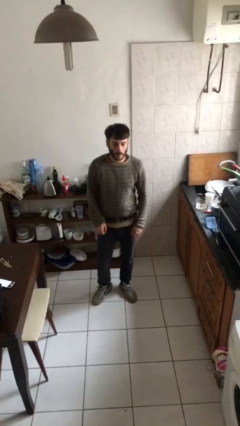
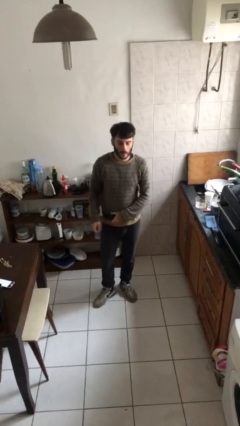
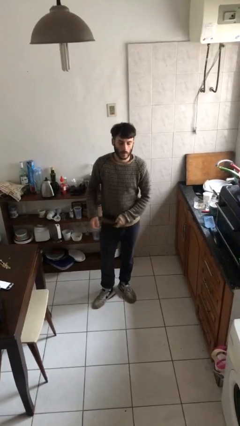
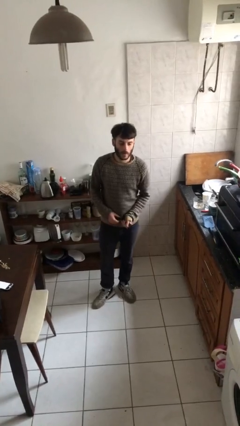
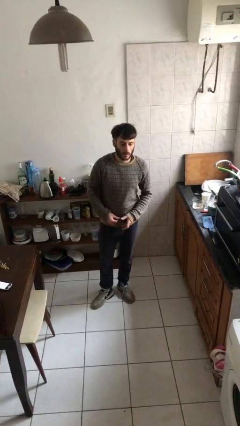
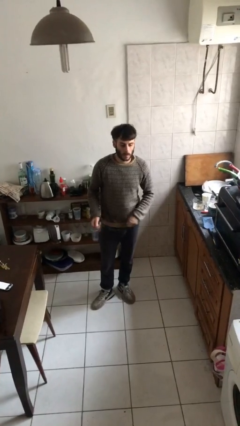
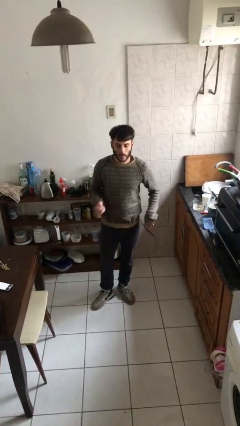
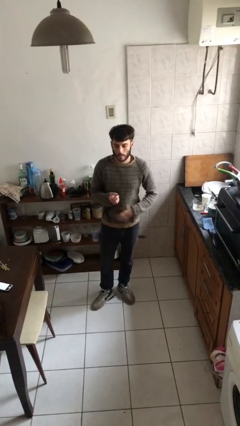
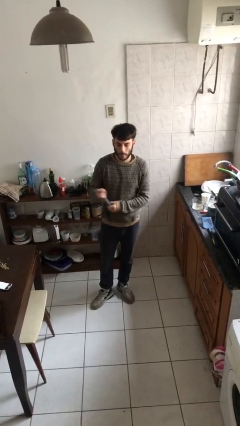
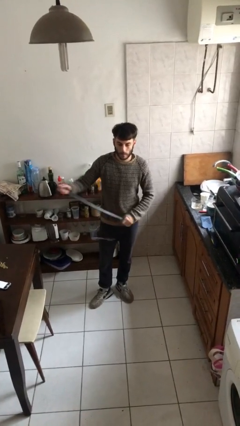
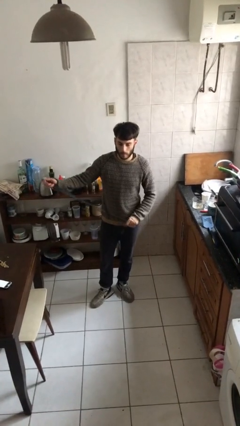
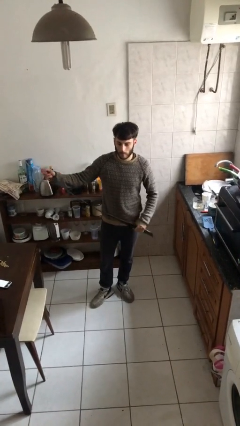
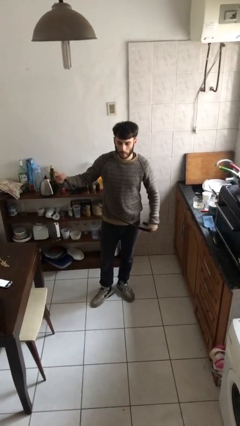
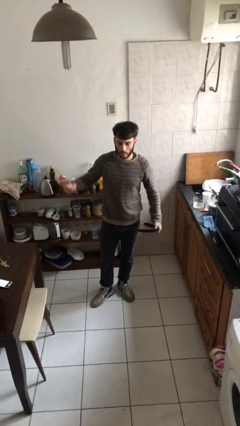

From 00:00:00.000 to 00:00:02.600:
person takes off belt

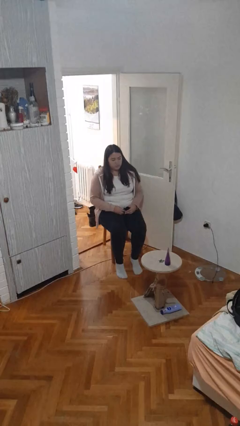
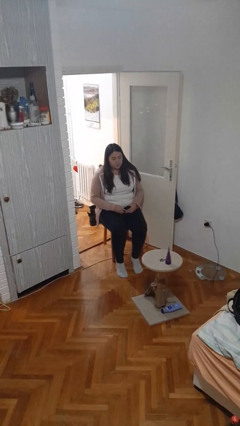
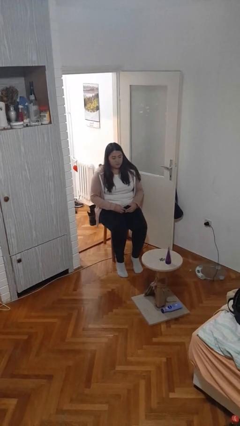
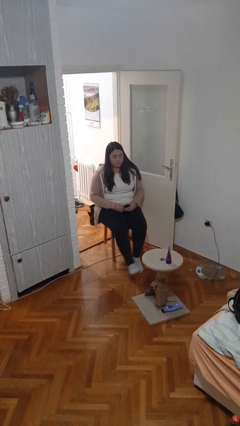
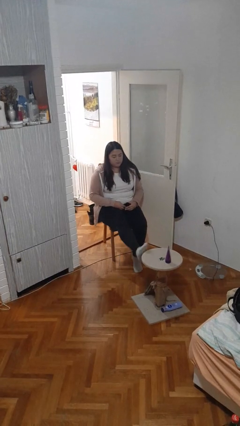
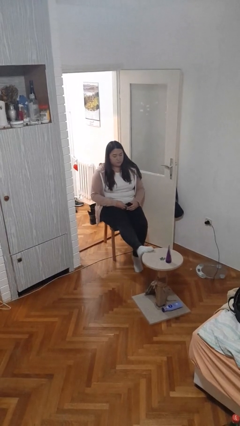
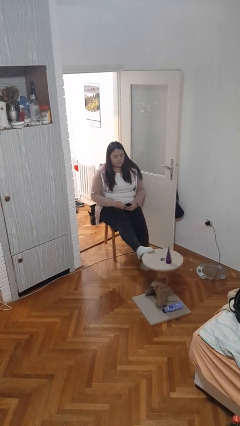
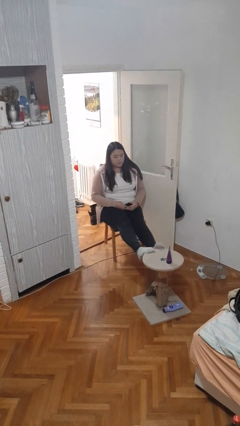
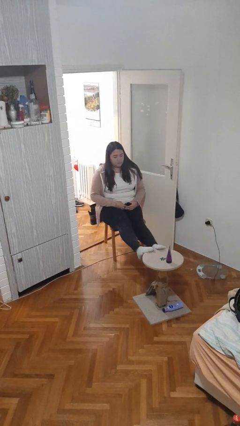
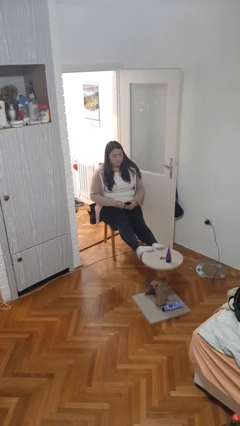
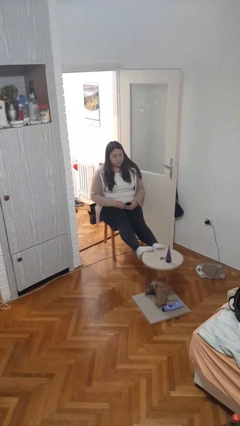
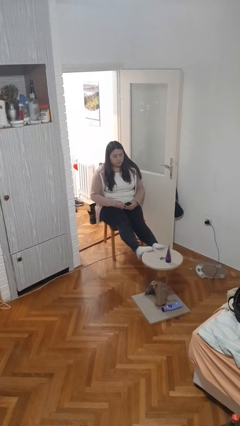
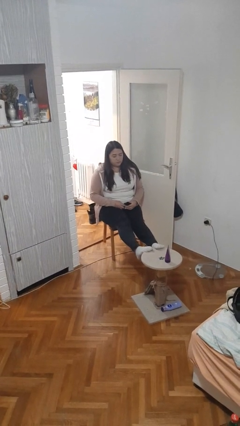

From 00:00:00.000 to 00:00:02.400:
person puts feet up

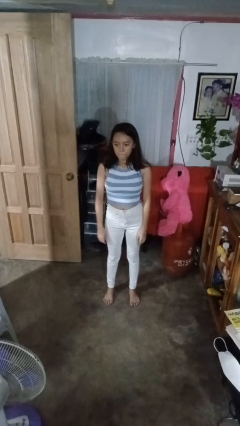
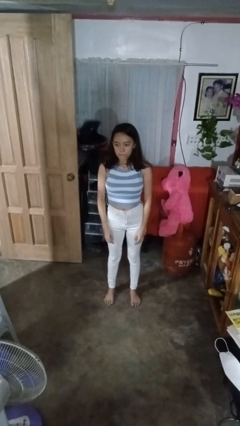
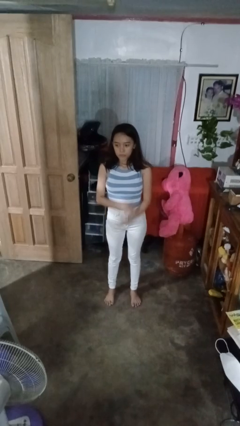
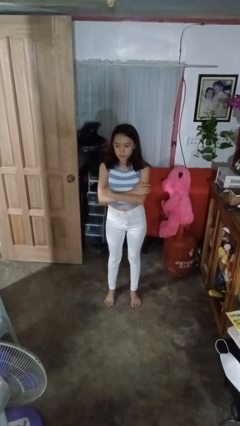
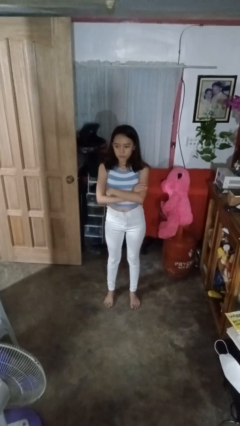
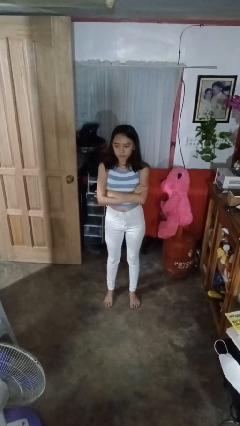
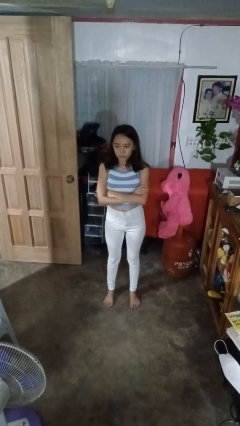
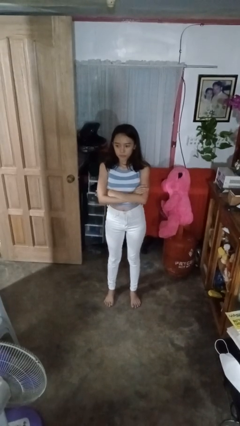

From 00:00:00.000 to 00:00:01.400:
person crosses arms

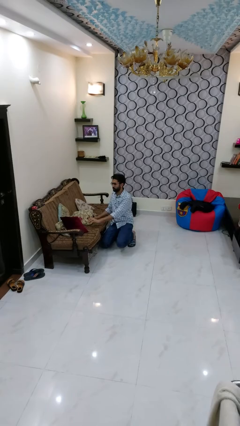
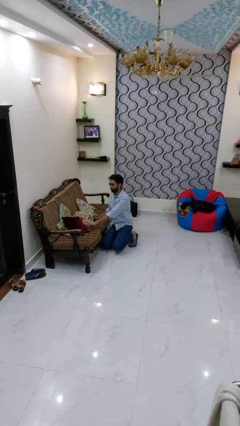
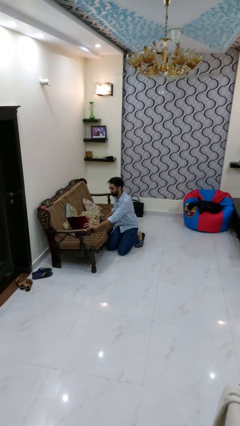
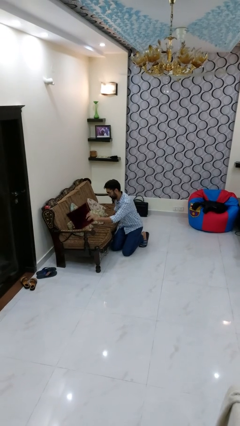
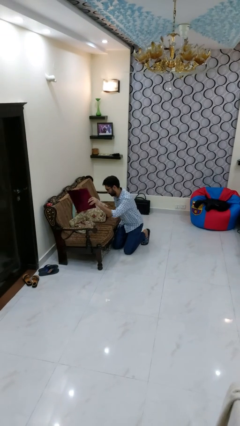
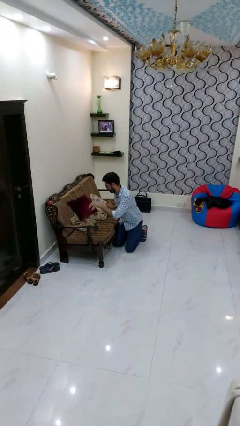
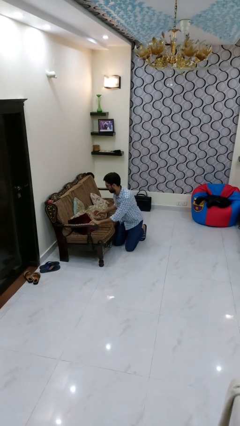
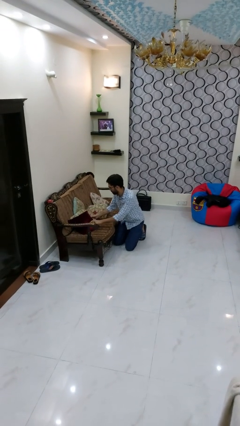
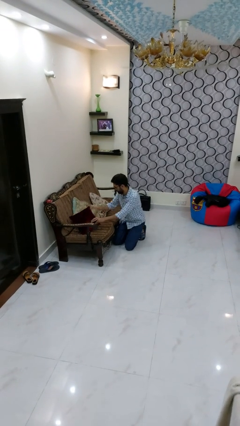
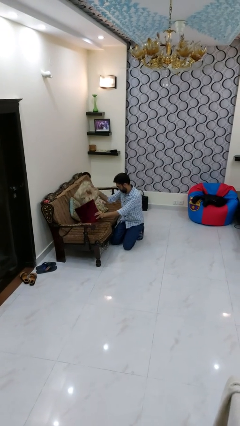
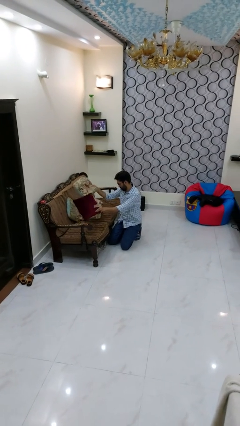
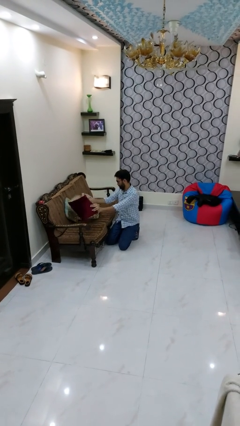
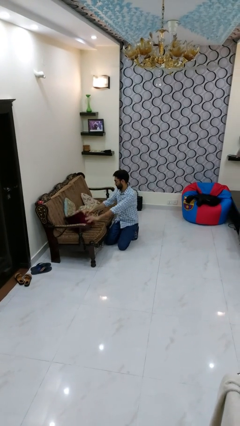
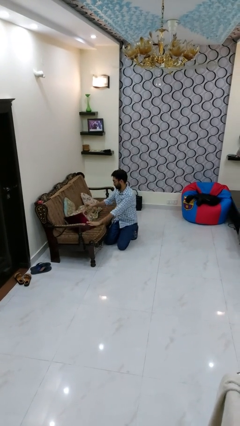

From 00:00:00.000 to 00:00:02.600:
person searches in couch

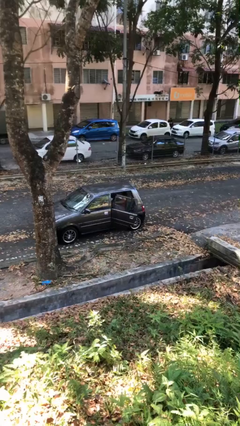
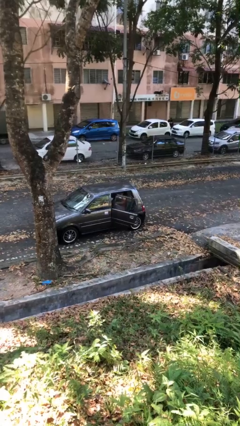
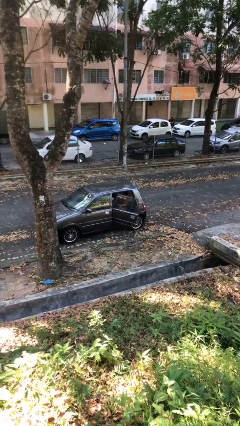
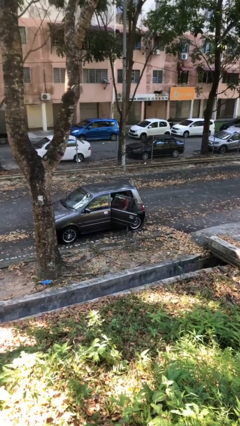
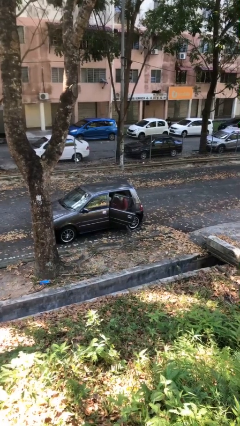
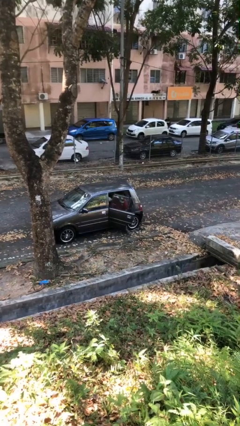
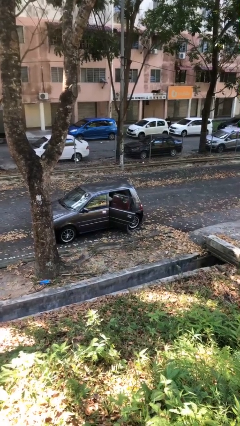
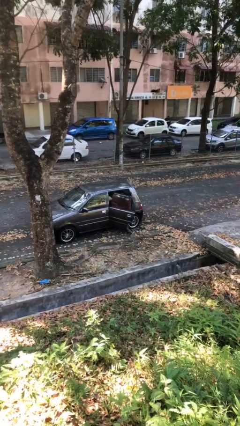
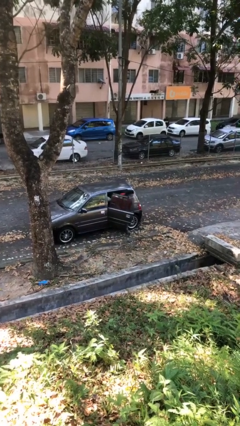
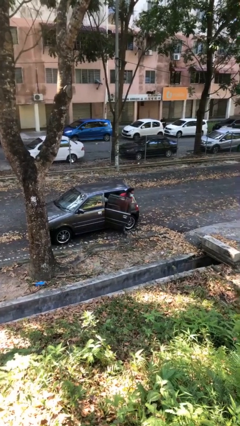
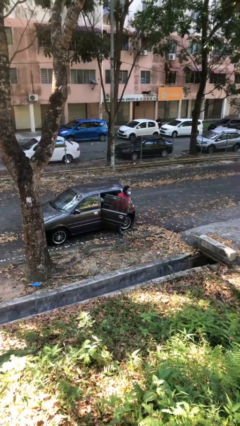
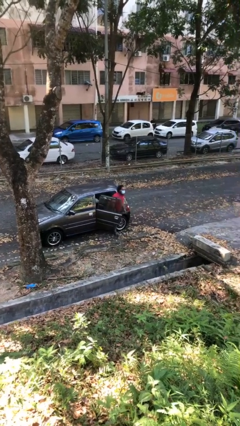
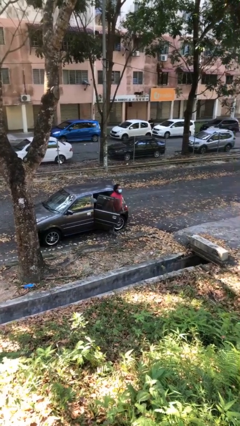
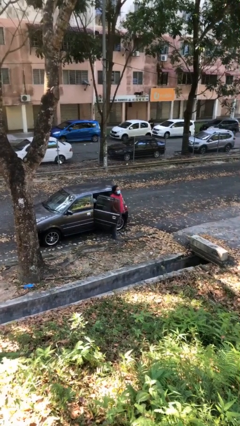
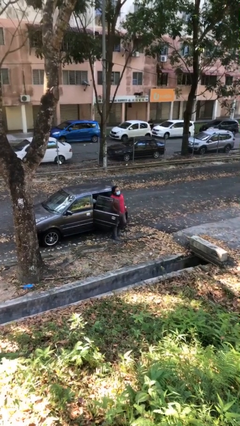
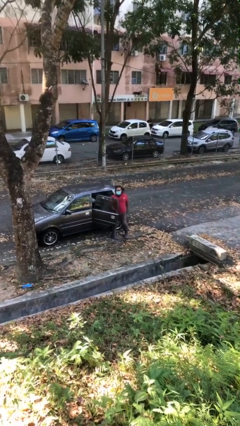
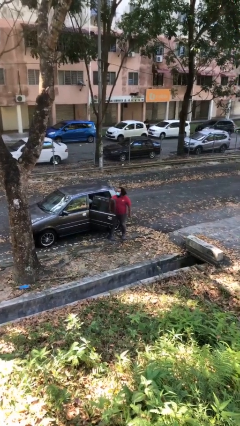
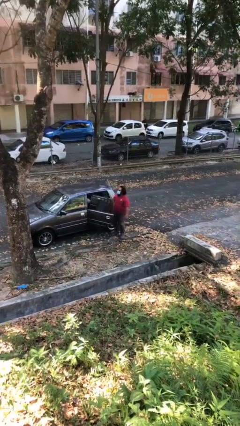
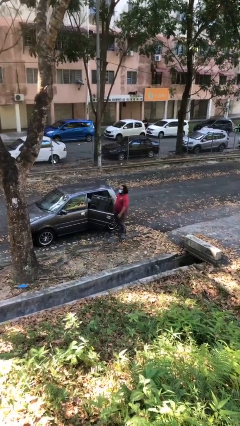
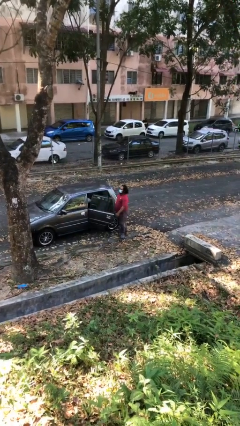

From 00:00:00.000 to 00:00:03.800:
person exits car

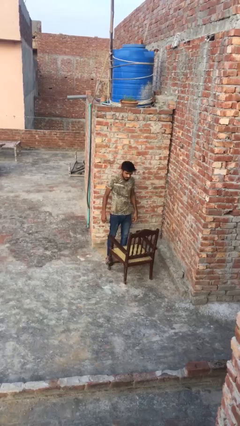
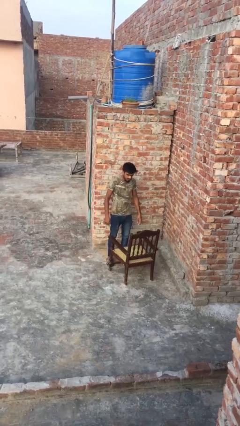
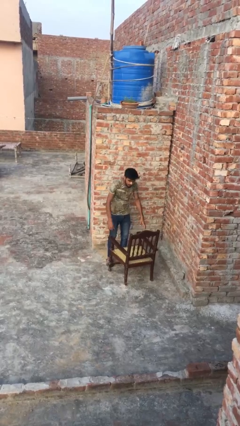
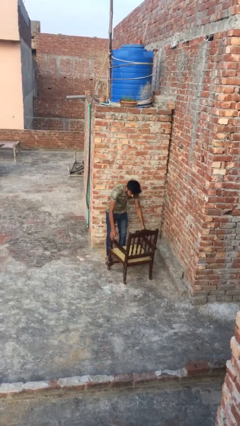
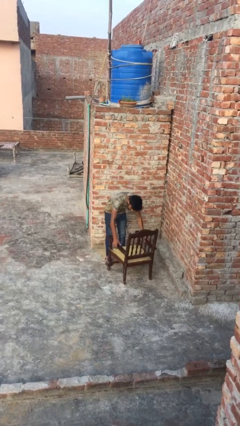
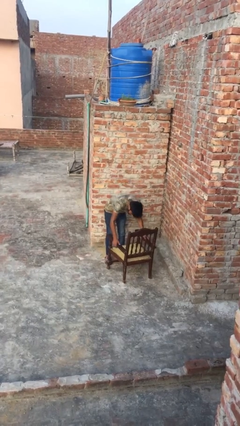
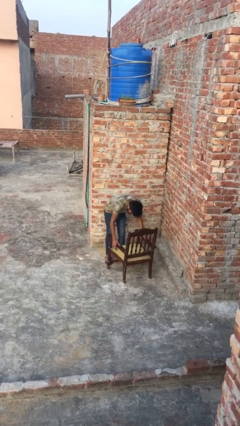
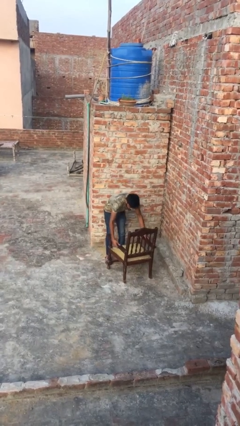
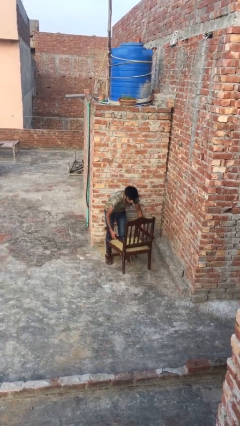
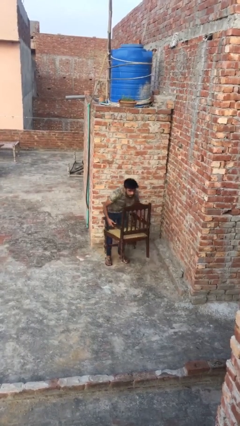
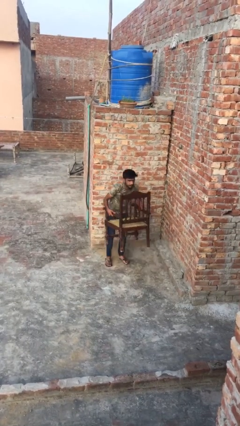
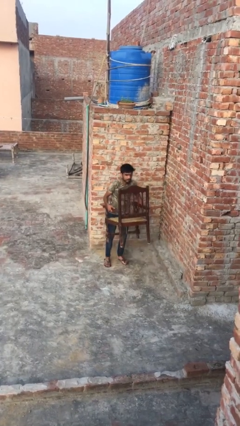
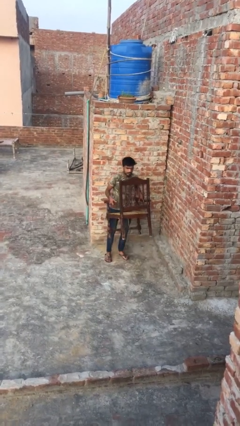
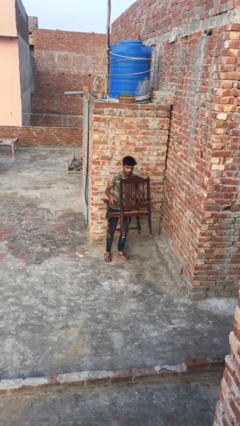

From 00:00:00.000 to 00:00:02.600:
person picks up object from floor

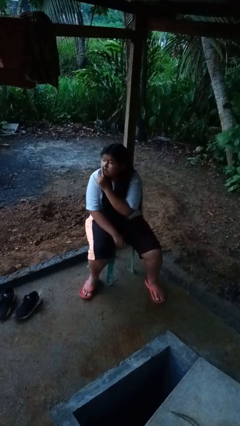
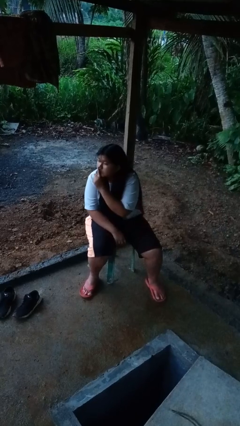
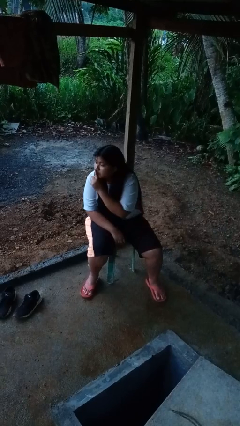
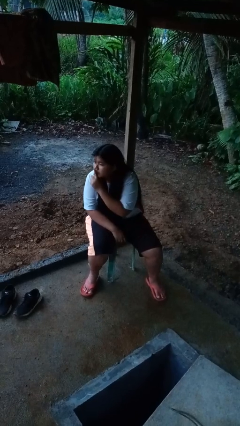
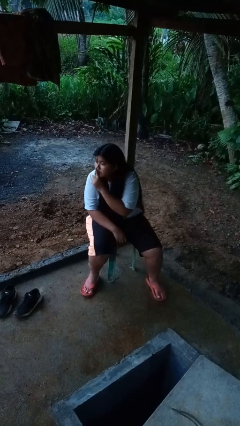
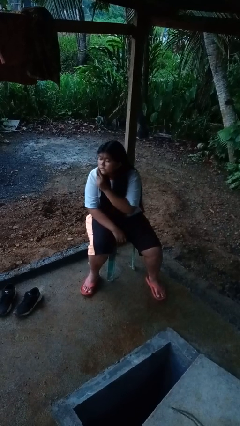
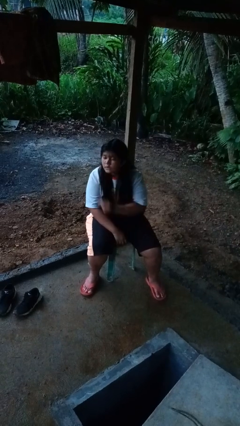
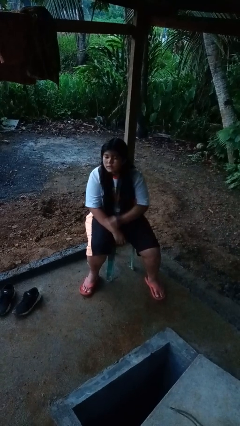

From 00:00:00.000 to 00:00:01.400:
person gestures be quiet
